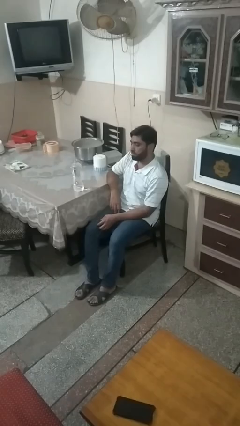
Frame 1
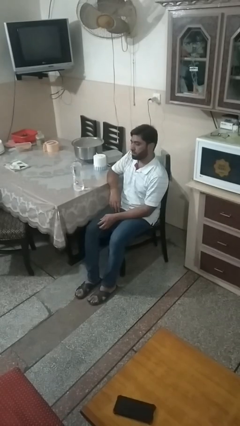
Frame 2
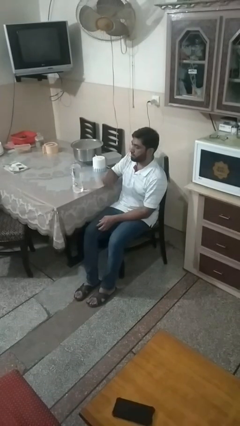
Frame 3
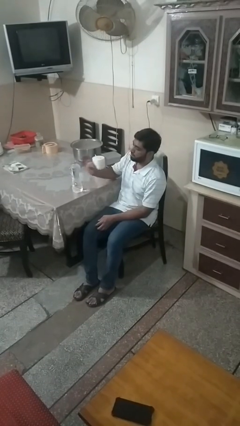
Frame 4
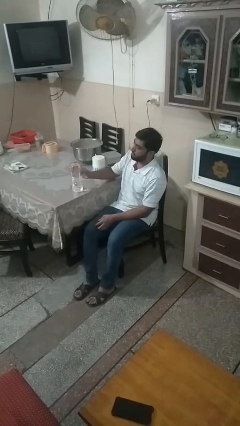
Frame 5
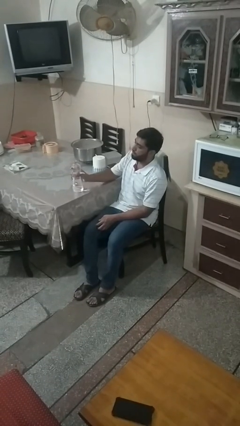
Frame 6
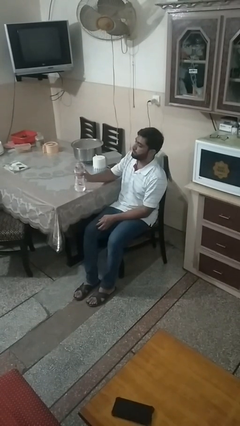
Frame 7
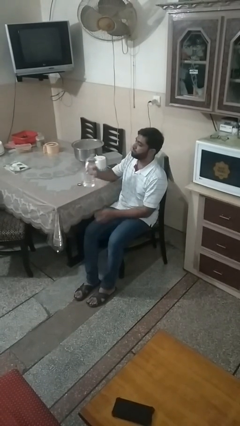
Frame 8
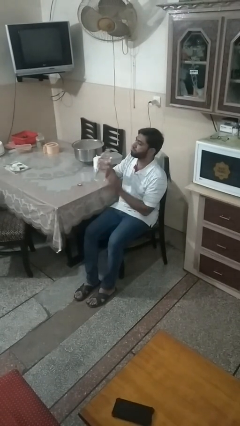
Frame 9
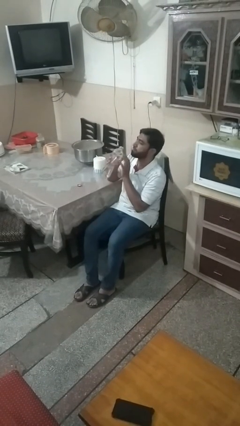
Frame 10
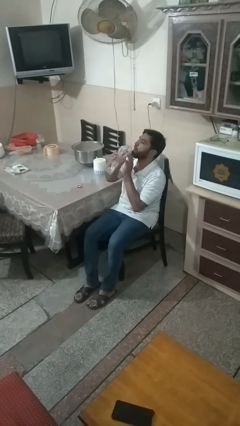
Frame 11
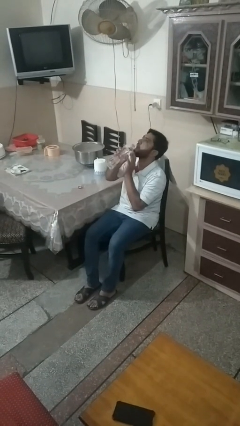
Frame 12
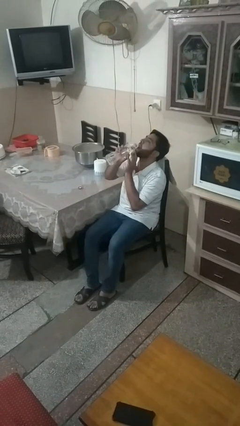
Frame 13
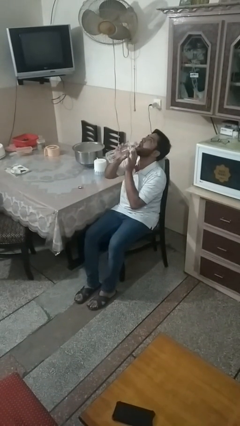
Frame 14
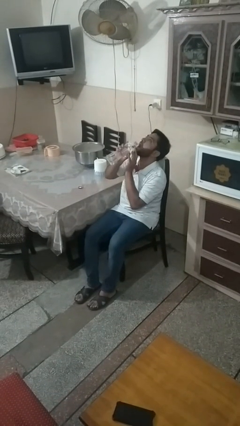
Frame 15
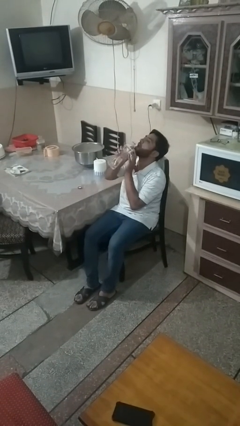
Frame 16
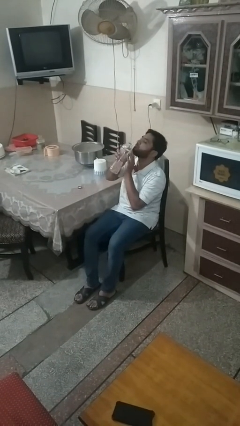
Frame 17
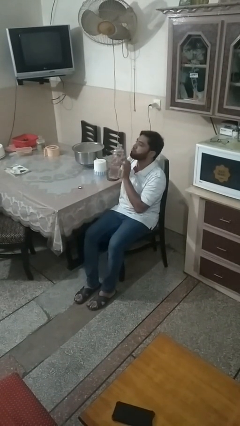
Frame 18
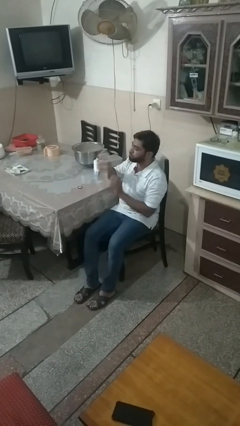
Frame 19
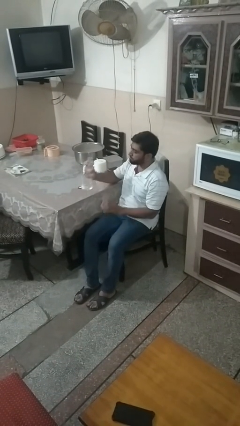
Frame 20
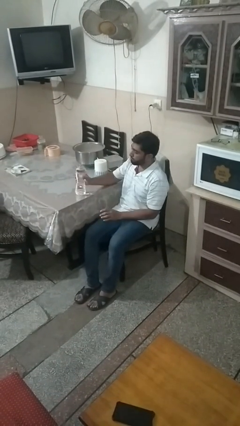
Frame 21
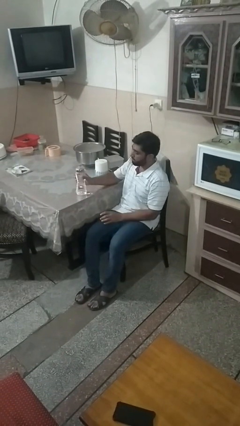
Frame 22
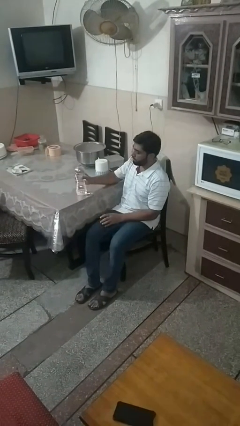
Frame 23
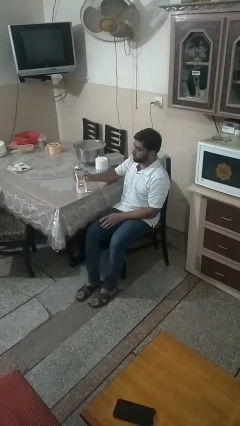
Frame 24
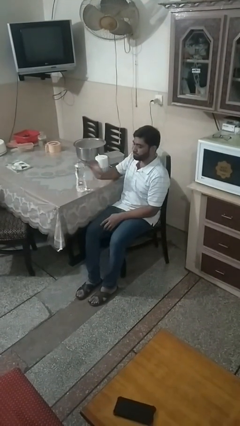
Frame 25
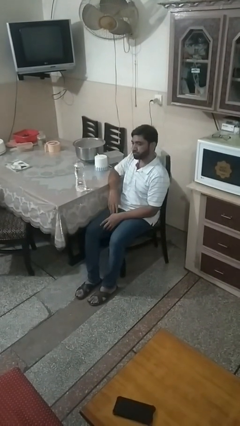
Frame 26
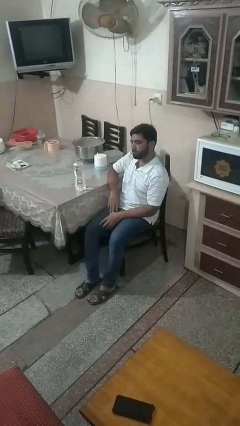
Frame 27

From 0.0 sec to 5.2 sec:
person drinks from bottle

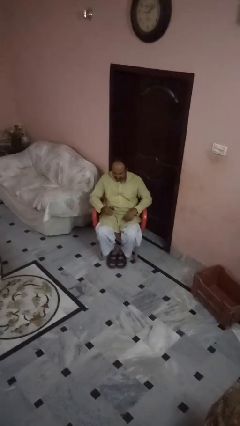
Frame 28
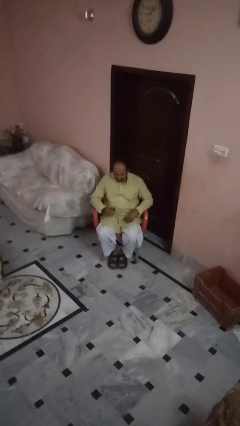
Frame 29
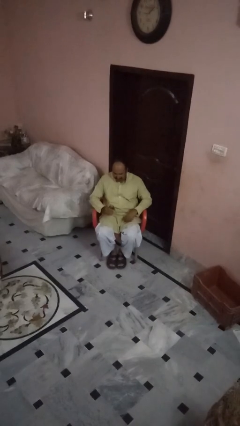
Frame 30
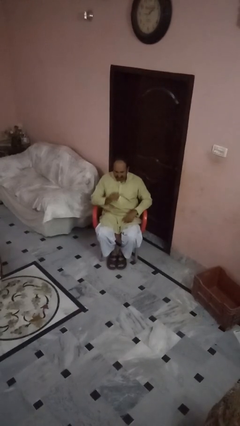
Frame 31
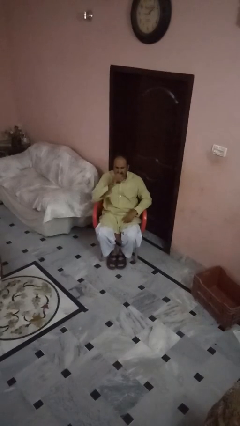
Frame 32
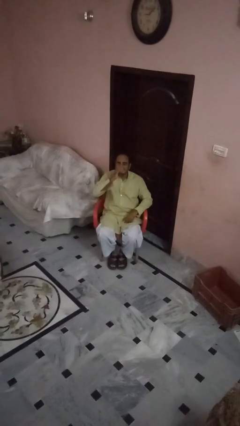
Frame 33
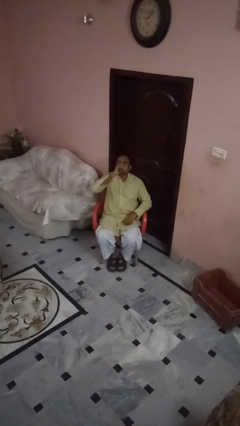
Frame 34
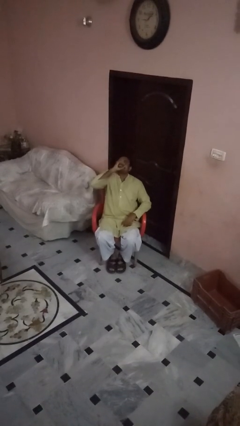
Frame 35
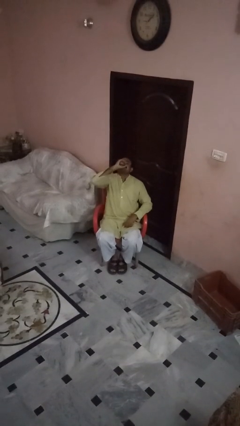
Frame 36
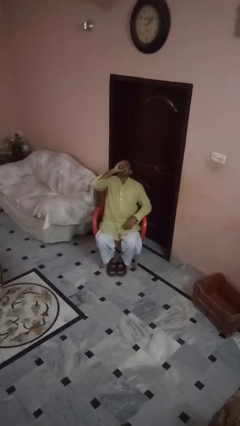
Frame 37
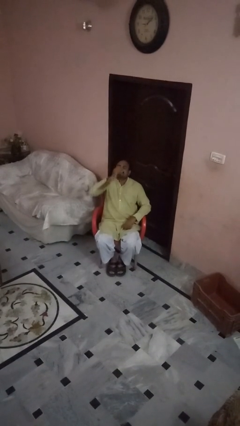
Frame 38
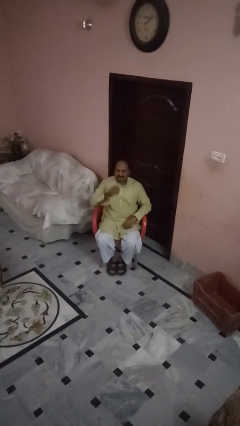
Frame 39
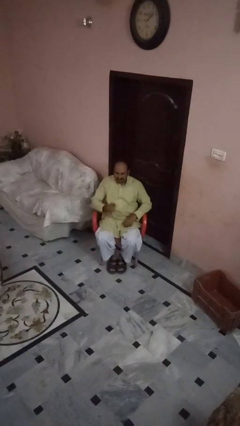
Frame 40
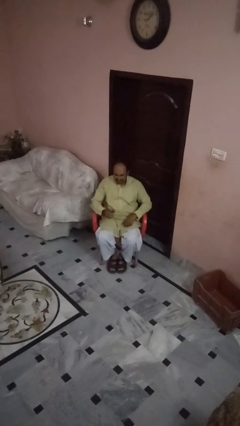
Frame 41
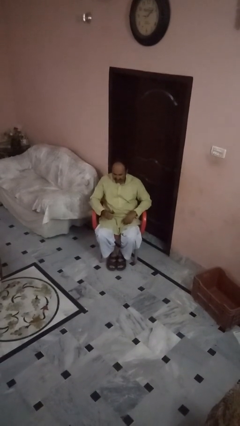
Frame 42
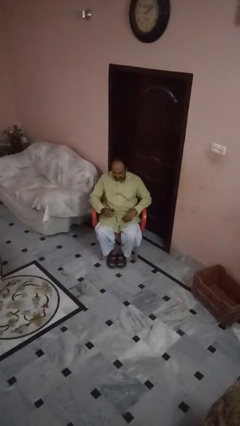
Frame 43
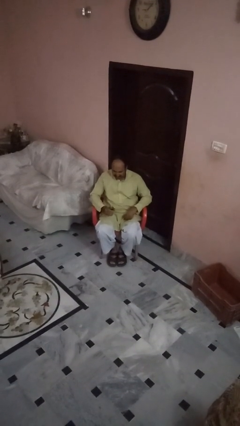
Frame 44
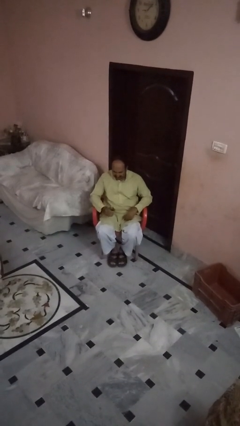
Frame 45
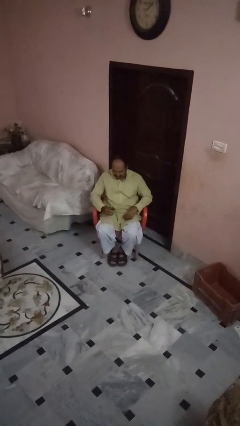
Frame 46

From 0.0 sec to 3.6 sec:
person drinks from beverage can

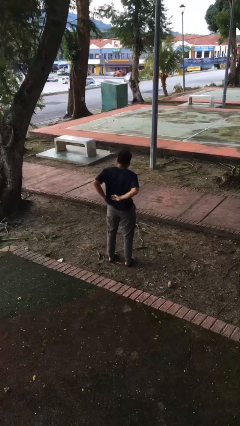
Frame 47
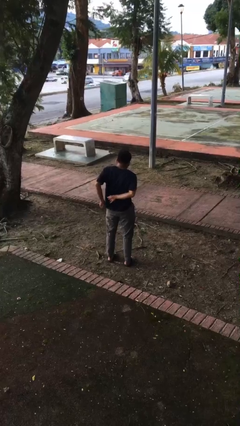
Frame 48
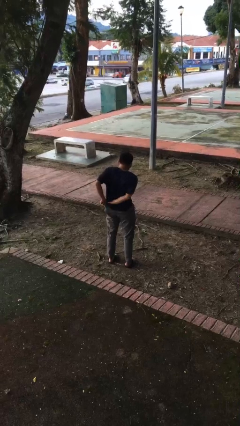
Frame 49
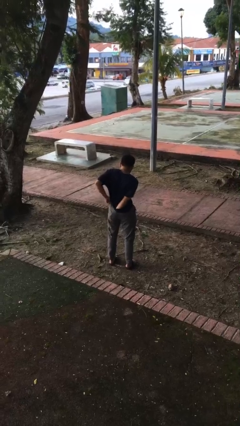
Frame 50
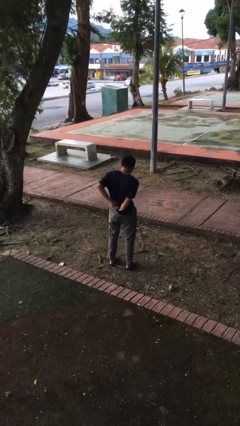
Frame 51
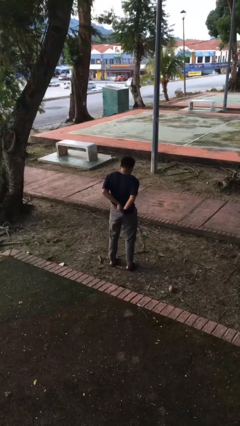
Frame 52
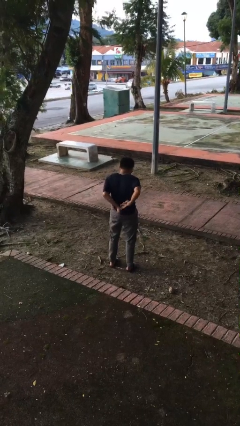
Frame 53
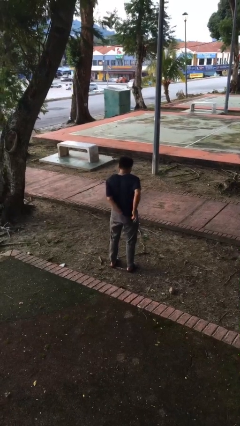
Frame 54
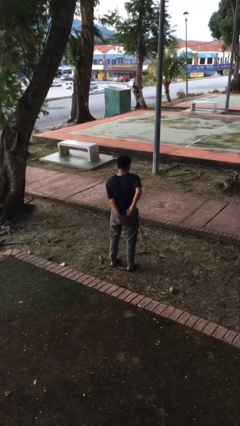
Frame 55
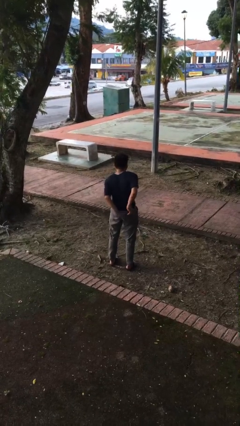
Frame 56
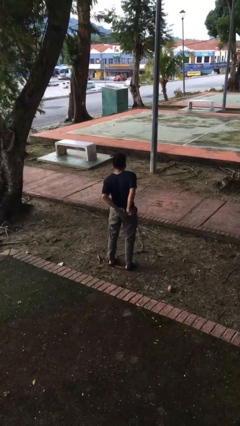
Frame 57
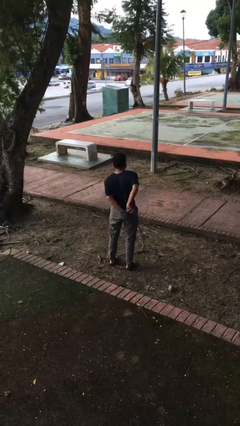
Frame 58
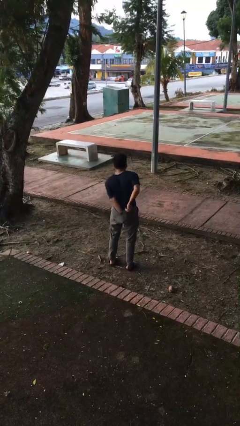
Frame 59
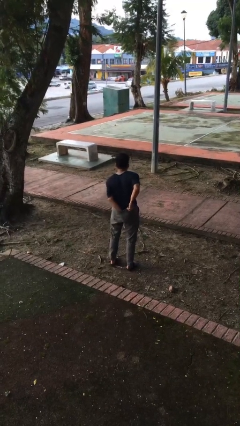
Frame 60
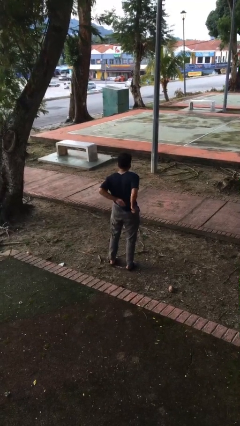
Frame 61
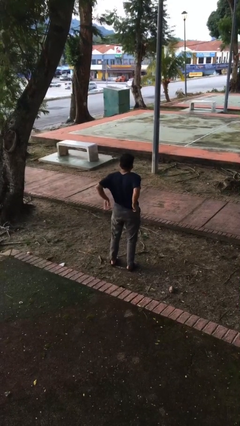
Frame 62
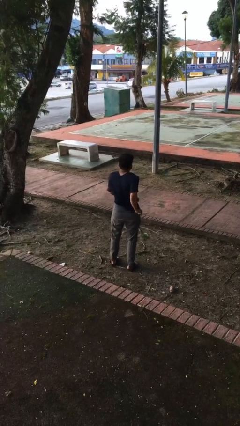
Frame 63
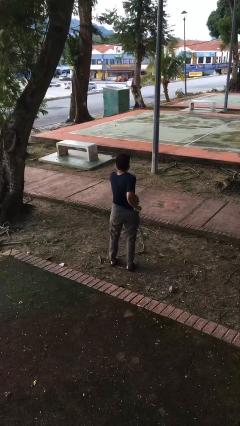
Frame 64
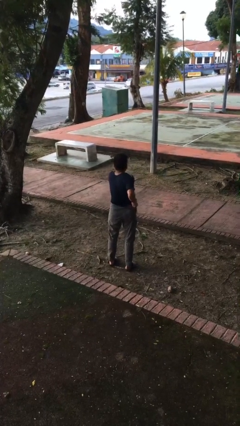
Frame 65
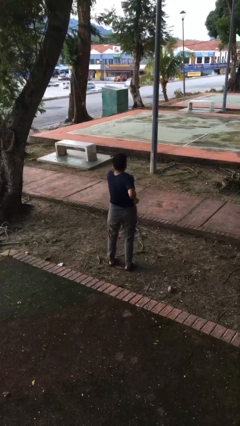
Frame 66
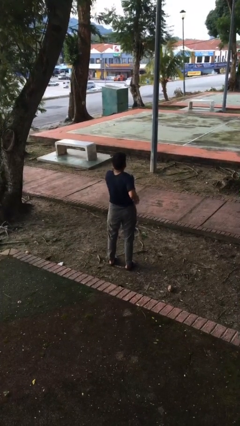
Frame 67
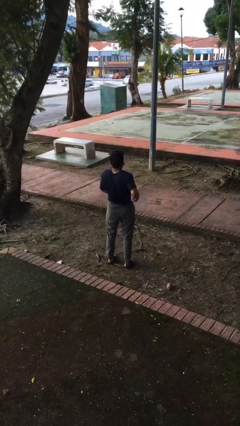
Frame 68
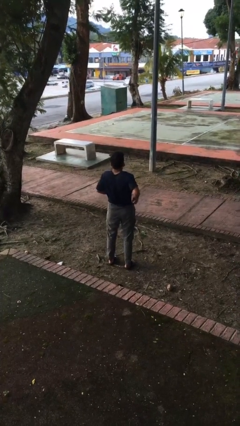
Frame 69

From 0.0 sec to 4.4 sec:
person tucks in shirt

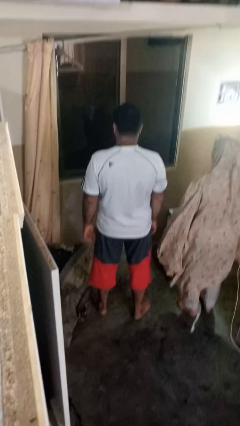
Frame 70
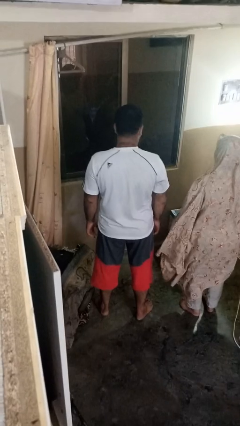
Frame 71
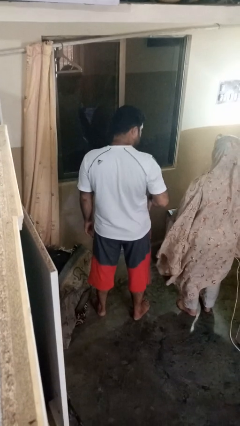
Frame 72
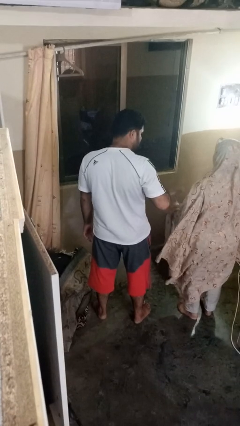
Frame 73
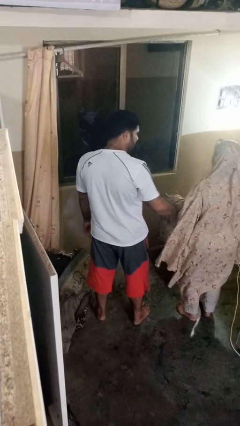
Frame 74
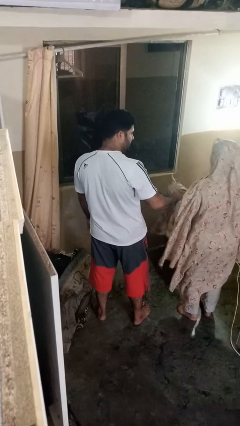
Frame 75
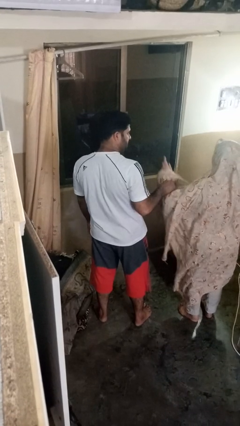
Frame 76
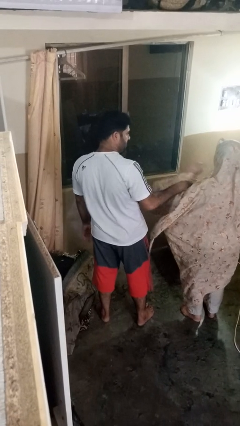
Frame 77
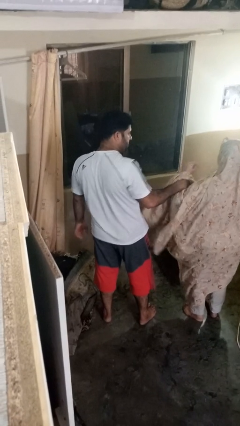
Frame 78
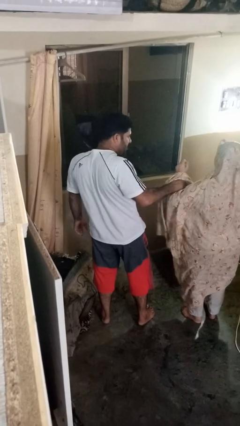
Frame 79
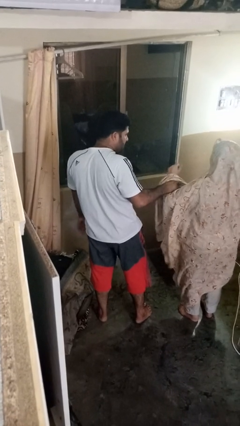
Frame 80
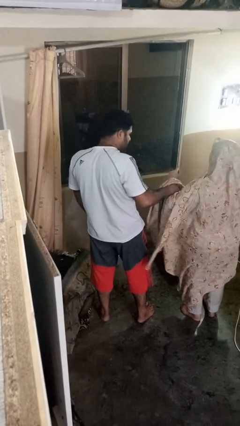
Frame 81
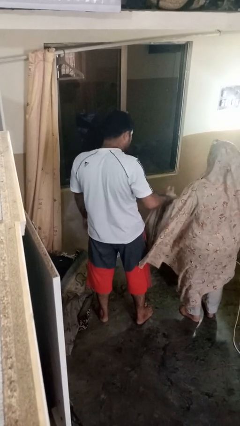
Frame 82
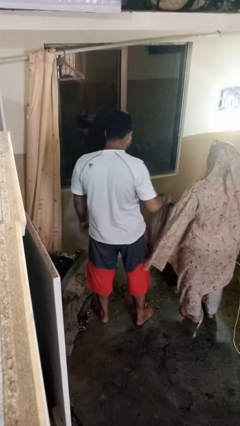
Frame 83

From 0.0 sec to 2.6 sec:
person grabs person by forearm

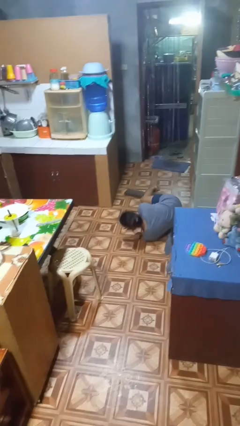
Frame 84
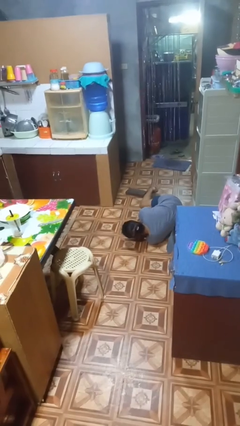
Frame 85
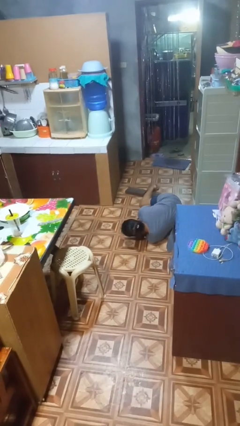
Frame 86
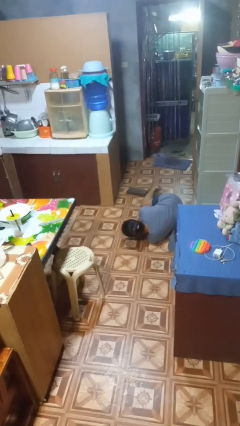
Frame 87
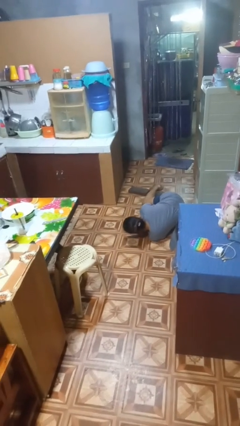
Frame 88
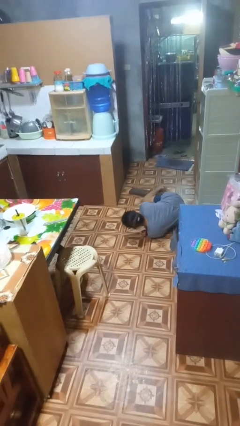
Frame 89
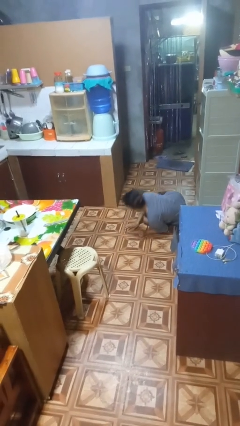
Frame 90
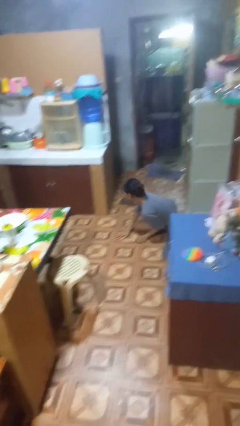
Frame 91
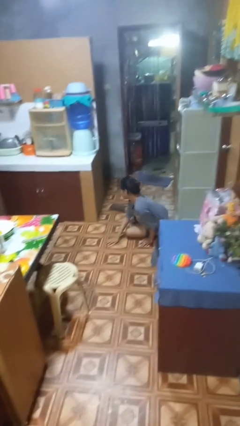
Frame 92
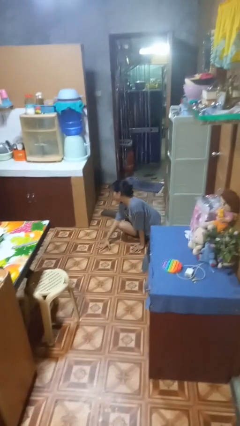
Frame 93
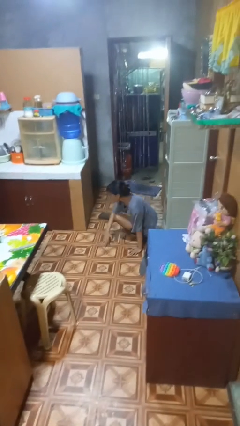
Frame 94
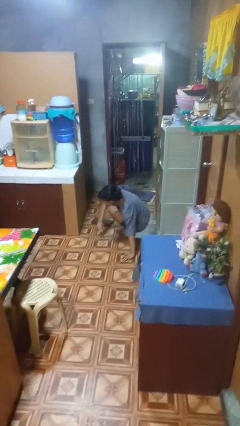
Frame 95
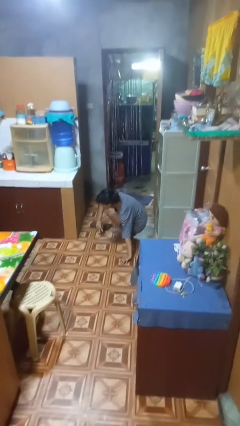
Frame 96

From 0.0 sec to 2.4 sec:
person lies down on floor
